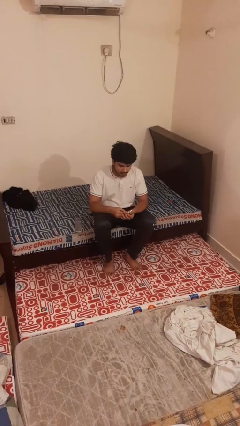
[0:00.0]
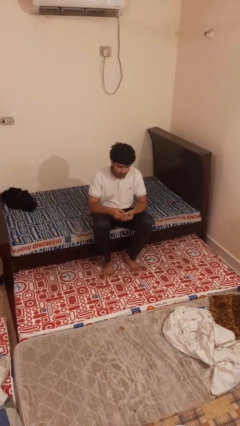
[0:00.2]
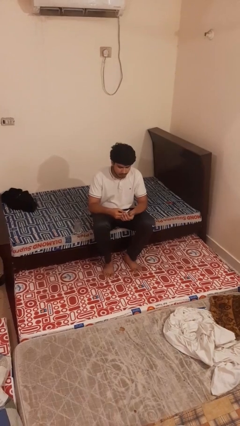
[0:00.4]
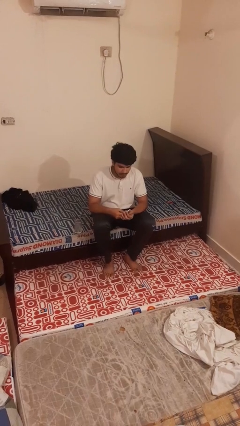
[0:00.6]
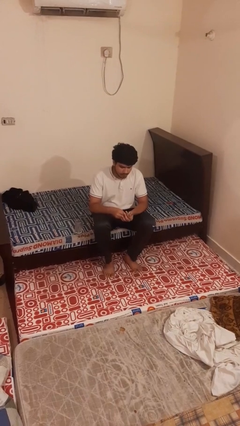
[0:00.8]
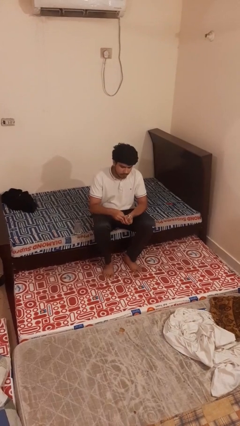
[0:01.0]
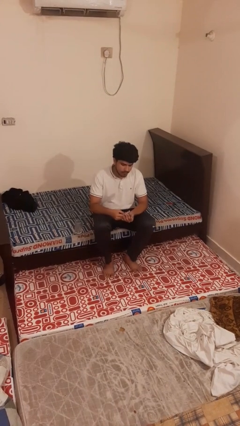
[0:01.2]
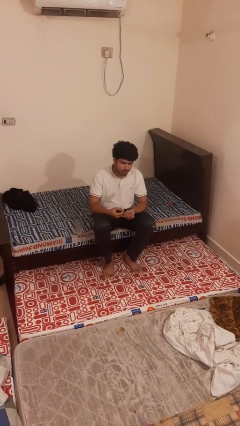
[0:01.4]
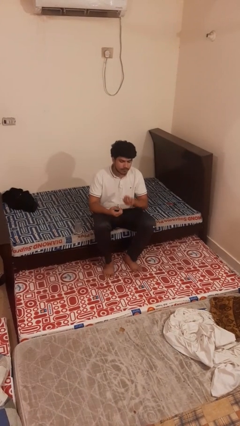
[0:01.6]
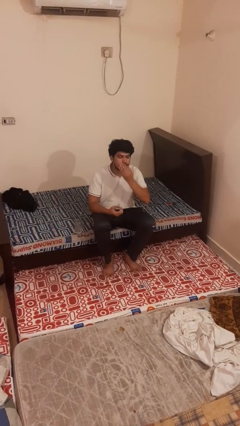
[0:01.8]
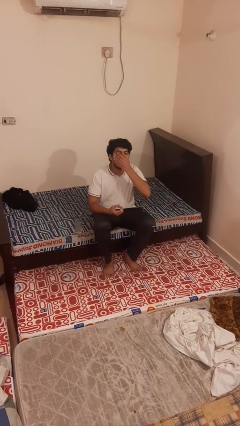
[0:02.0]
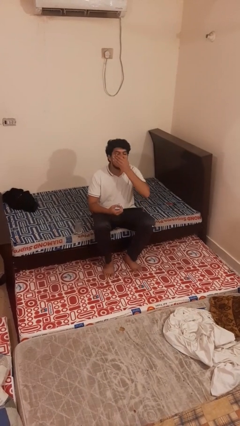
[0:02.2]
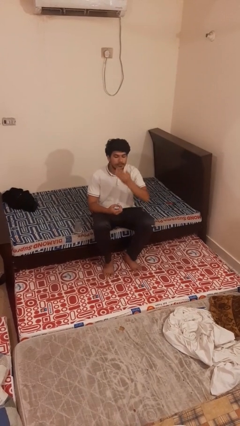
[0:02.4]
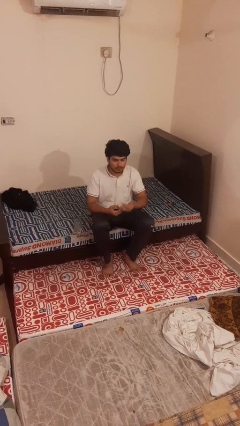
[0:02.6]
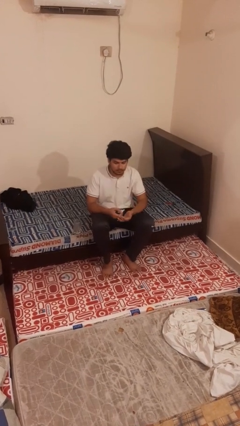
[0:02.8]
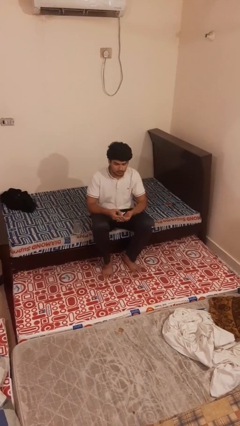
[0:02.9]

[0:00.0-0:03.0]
person takes medicine pills

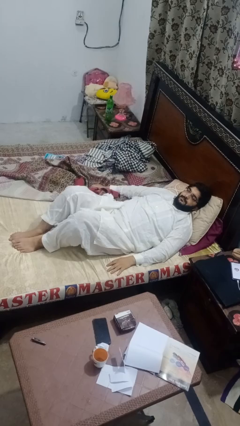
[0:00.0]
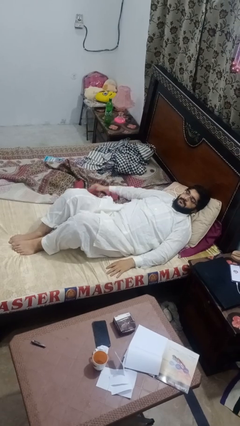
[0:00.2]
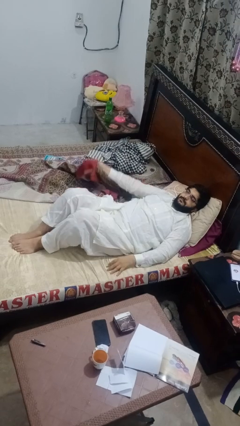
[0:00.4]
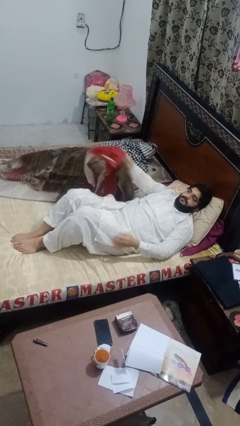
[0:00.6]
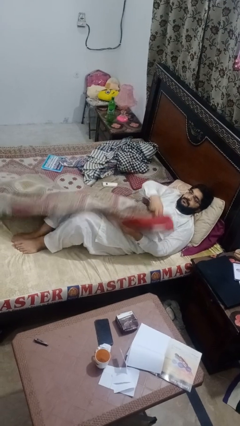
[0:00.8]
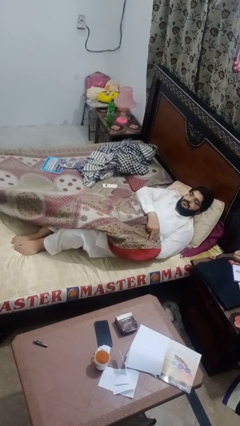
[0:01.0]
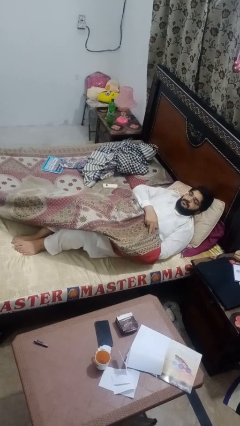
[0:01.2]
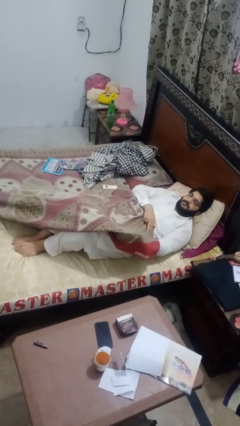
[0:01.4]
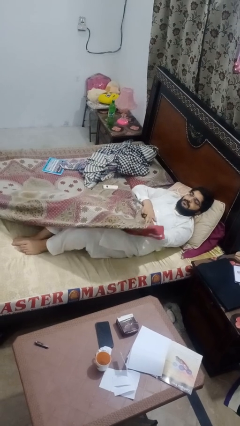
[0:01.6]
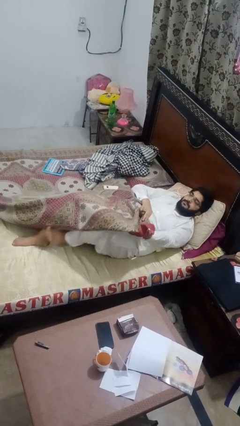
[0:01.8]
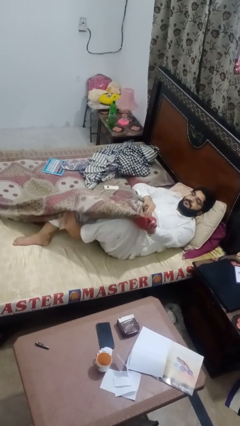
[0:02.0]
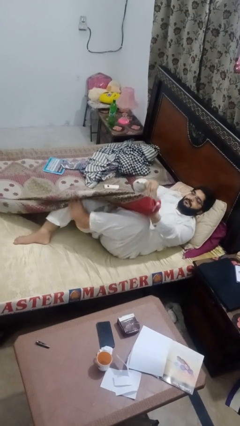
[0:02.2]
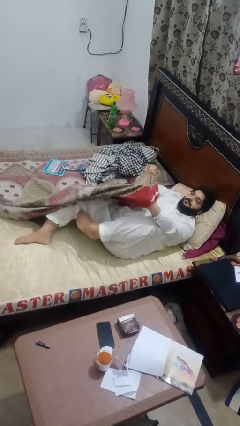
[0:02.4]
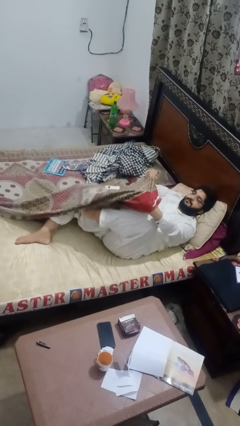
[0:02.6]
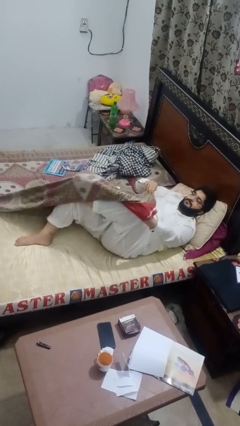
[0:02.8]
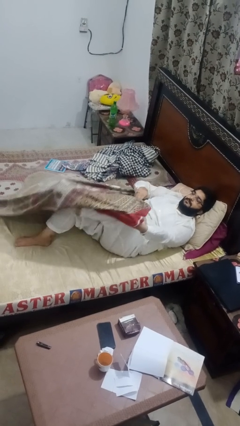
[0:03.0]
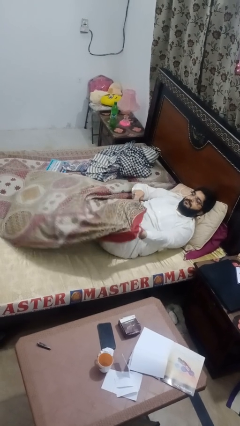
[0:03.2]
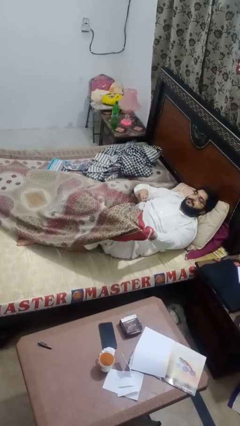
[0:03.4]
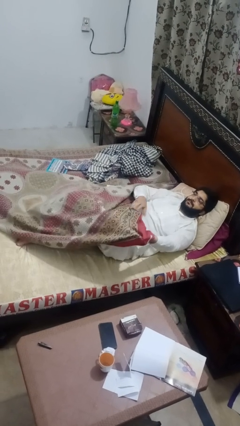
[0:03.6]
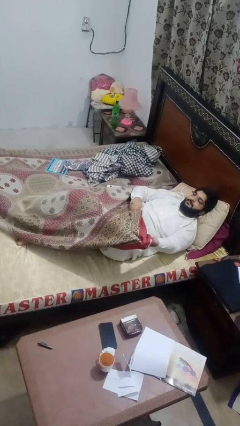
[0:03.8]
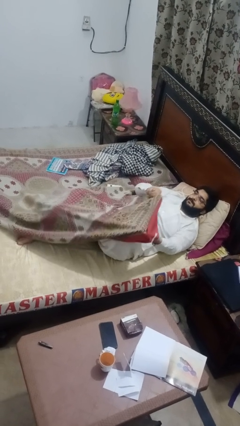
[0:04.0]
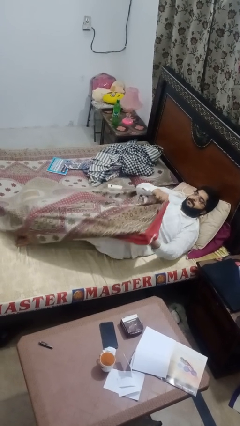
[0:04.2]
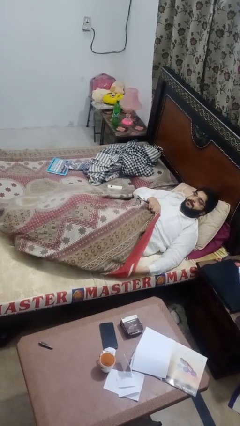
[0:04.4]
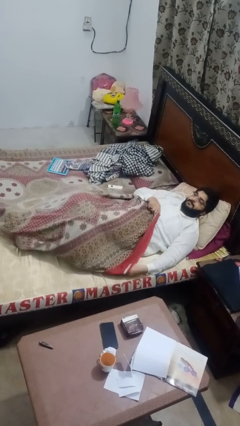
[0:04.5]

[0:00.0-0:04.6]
person covers with bedsheets

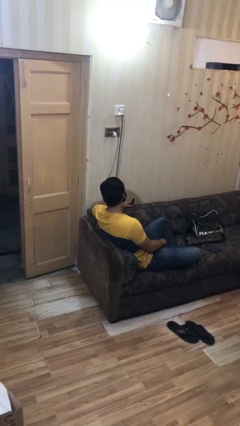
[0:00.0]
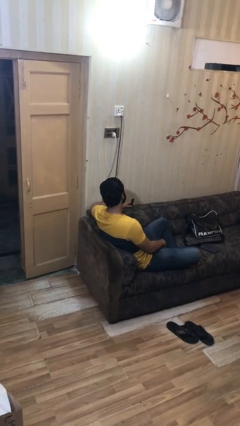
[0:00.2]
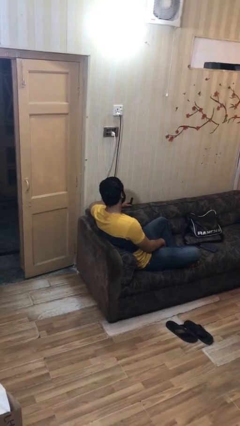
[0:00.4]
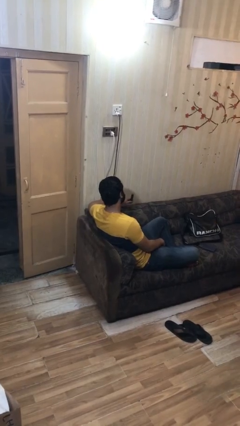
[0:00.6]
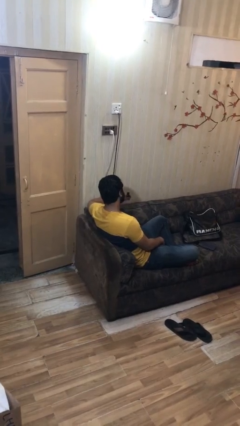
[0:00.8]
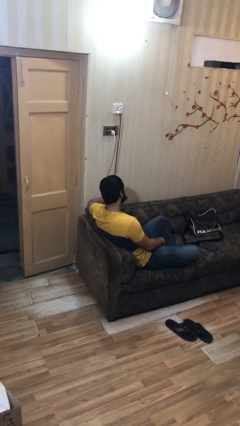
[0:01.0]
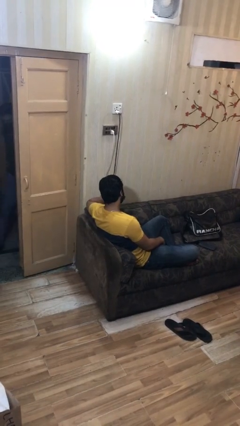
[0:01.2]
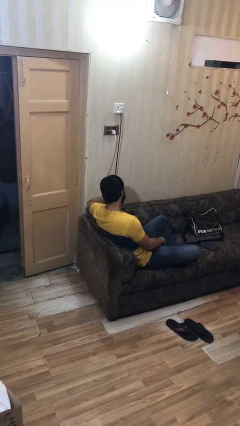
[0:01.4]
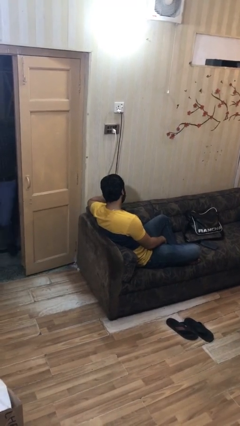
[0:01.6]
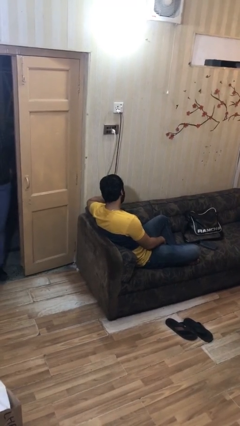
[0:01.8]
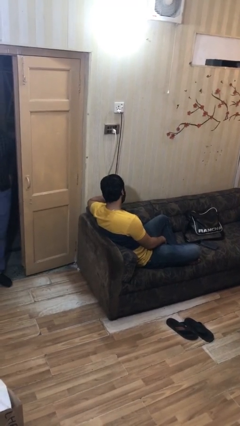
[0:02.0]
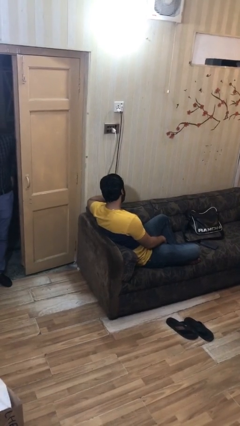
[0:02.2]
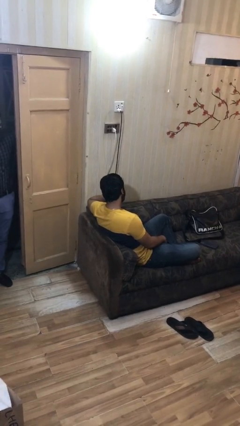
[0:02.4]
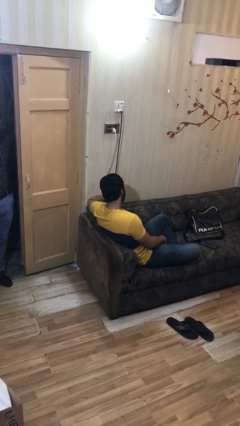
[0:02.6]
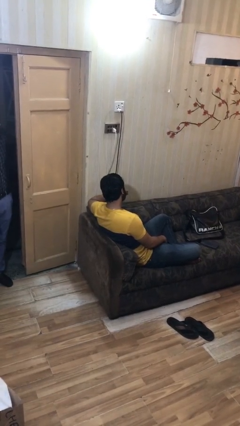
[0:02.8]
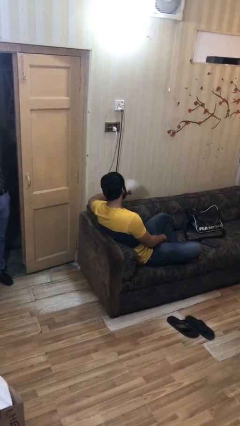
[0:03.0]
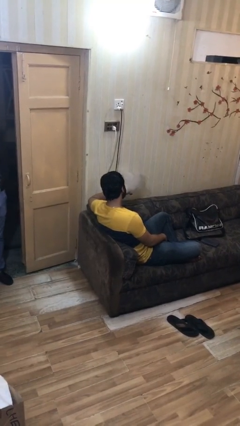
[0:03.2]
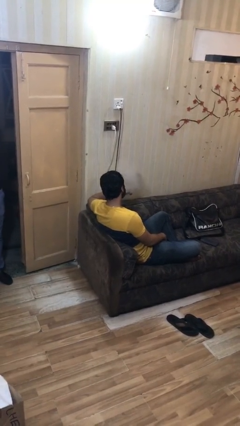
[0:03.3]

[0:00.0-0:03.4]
person vapes

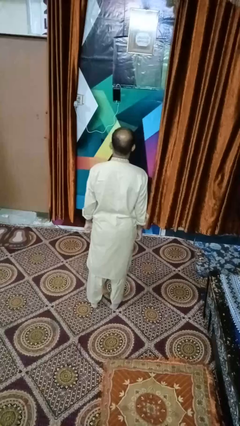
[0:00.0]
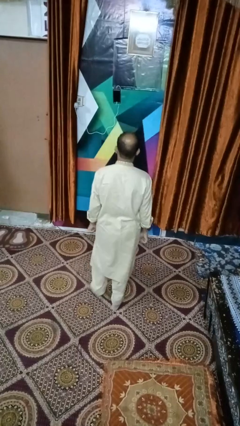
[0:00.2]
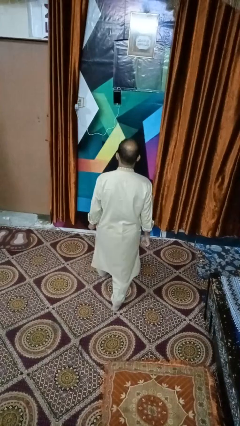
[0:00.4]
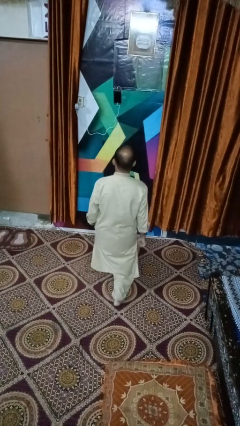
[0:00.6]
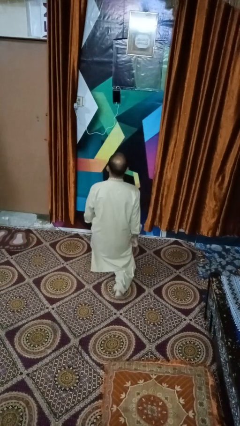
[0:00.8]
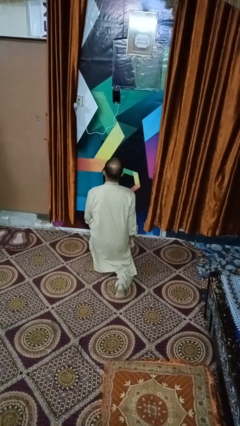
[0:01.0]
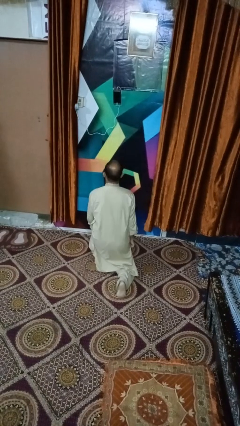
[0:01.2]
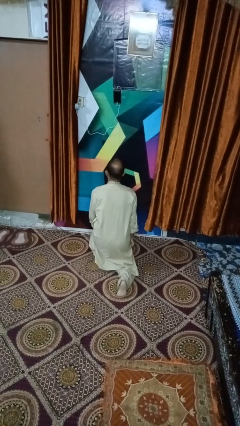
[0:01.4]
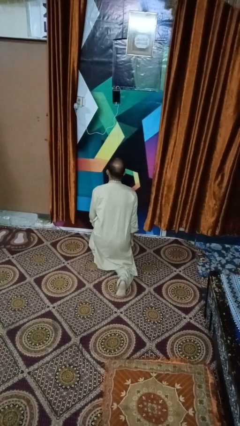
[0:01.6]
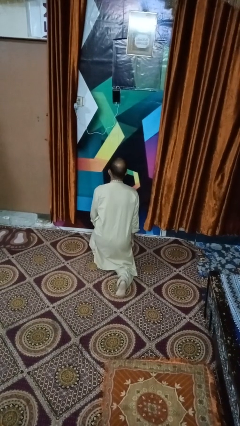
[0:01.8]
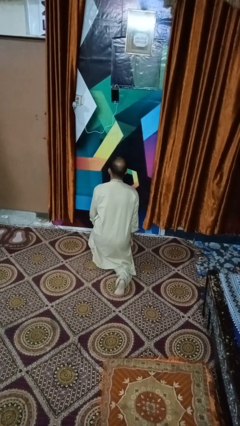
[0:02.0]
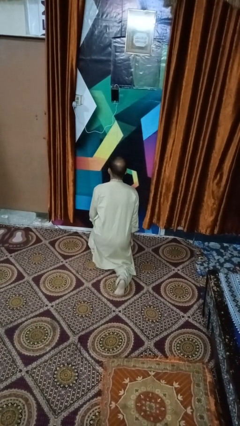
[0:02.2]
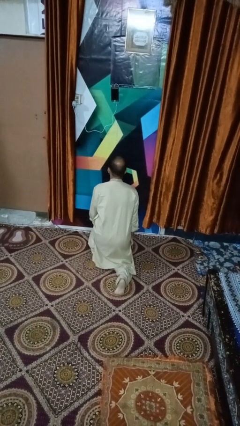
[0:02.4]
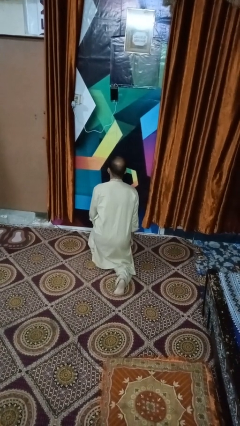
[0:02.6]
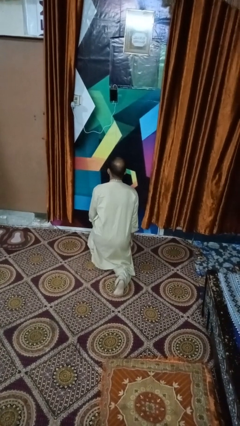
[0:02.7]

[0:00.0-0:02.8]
person exercises with lunges

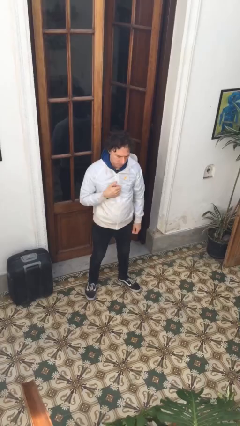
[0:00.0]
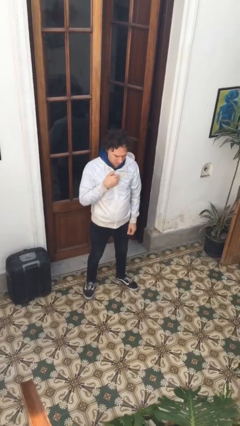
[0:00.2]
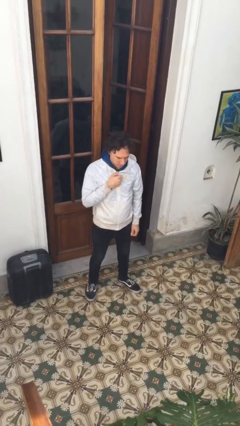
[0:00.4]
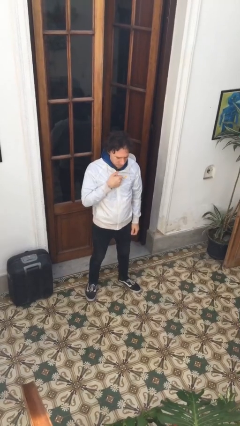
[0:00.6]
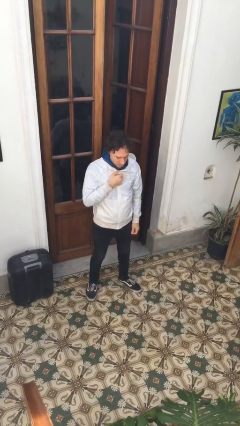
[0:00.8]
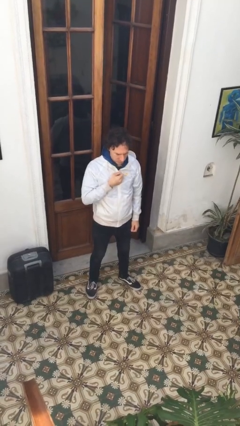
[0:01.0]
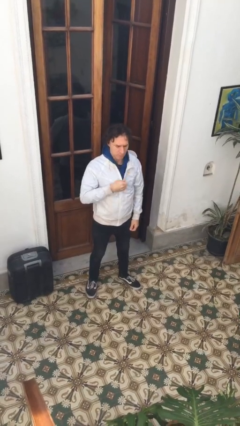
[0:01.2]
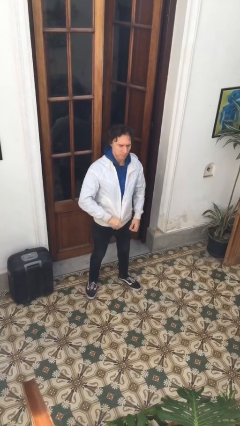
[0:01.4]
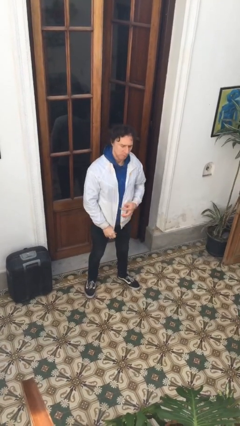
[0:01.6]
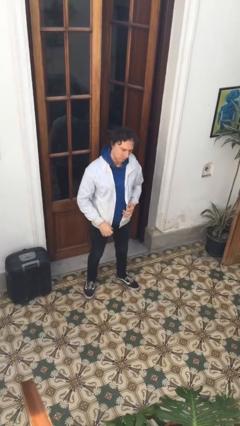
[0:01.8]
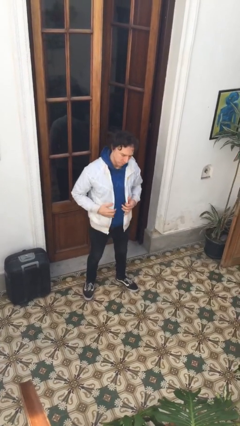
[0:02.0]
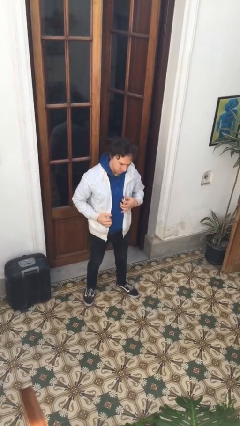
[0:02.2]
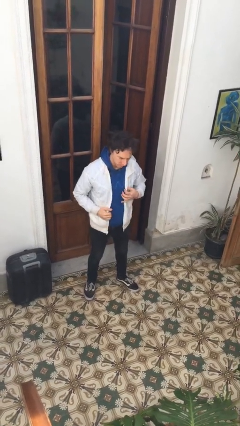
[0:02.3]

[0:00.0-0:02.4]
person unzips jacket

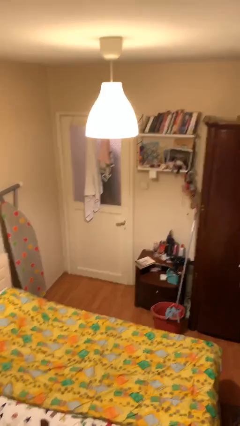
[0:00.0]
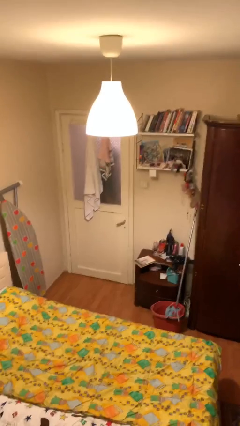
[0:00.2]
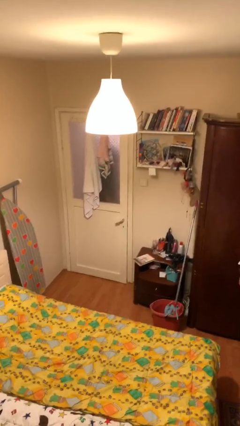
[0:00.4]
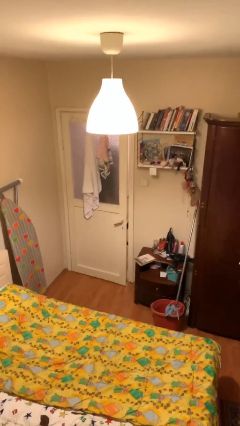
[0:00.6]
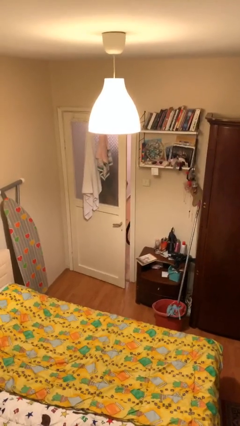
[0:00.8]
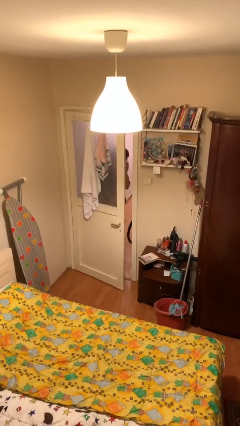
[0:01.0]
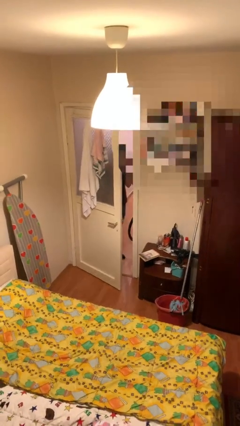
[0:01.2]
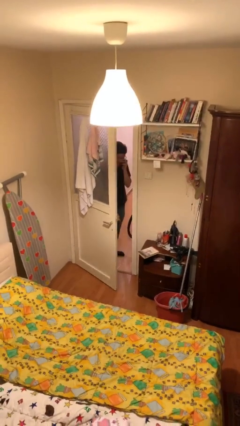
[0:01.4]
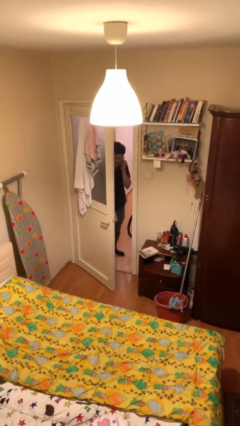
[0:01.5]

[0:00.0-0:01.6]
person opens facility door
